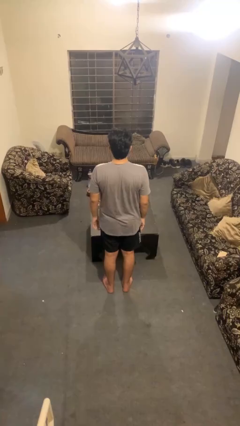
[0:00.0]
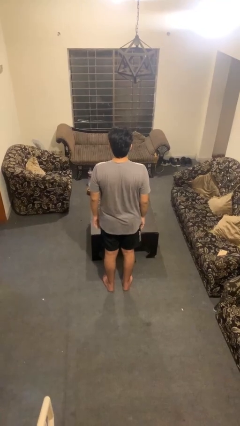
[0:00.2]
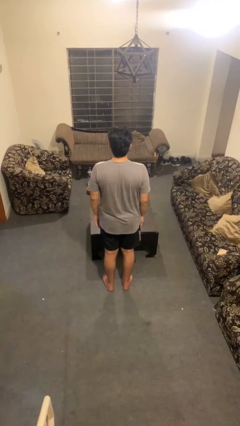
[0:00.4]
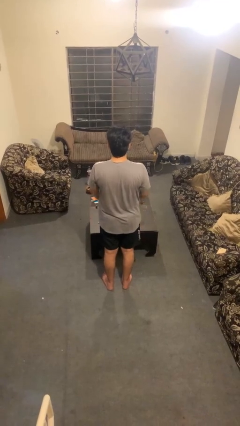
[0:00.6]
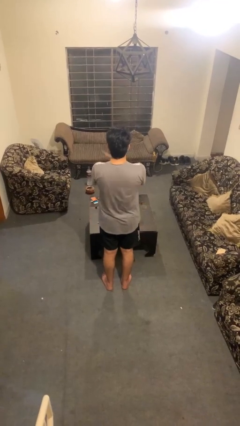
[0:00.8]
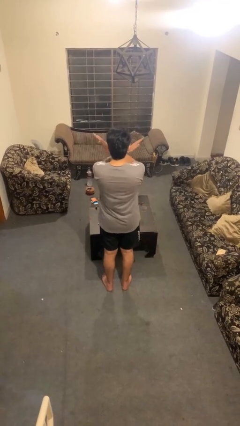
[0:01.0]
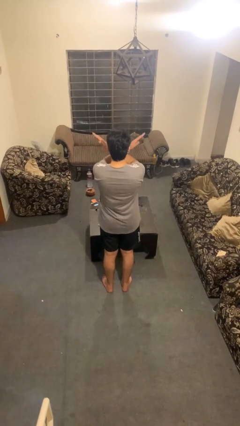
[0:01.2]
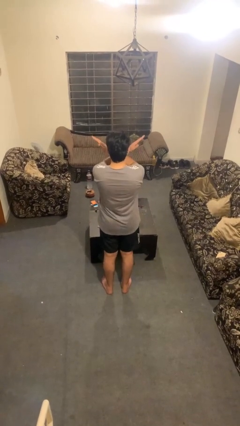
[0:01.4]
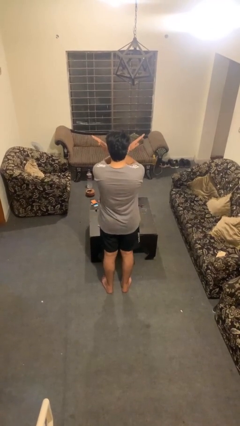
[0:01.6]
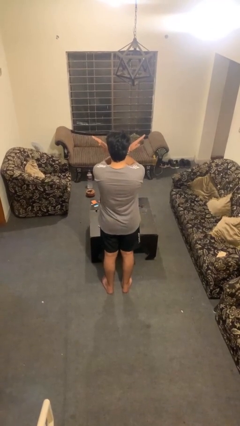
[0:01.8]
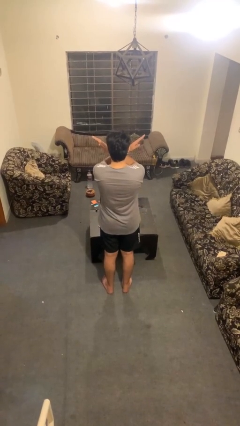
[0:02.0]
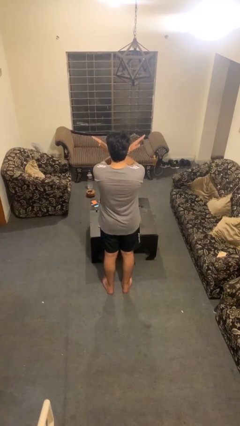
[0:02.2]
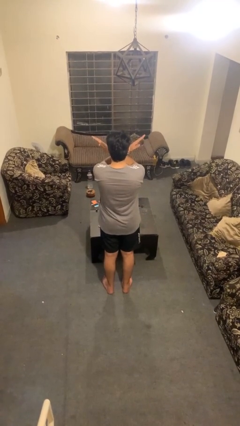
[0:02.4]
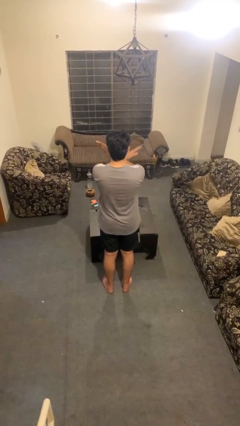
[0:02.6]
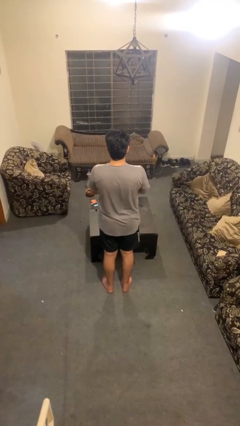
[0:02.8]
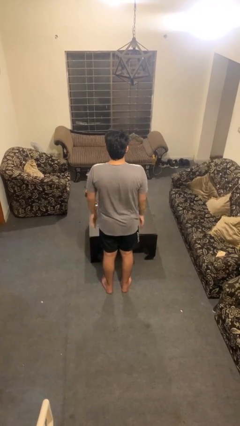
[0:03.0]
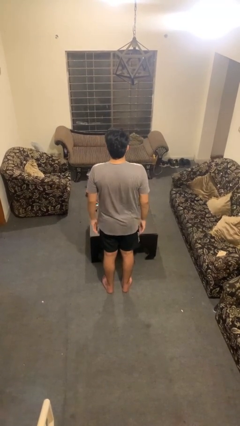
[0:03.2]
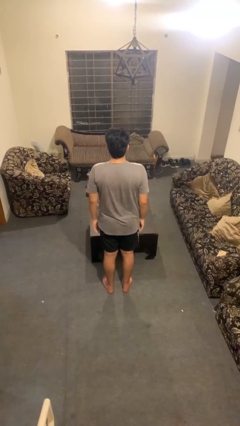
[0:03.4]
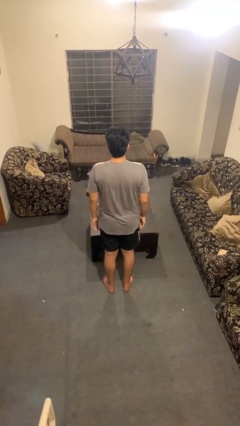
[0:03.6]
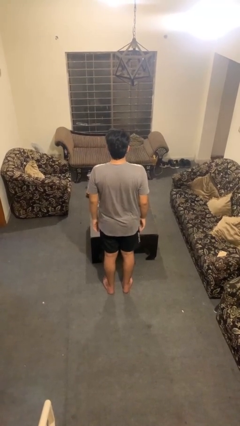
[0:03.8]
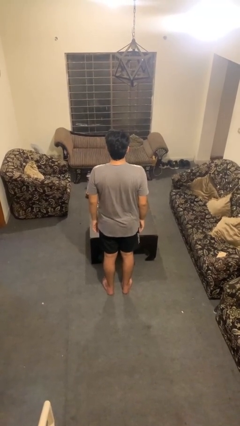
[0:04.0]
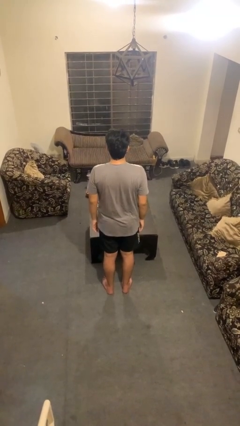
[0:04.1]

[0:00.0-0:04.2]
person gestures arms x

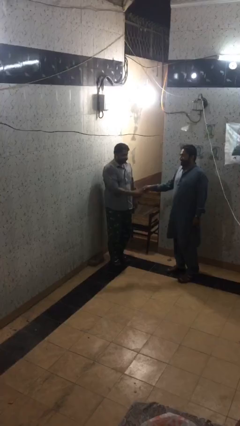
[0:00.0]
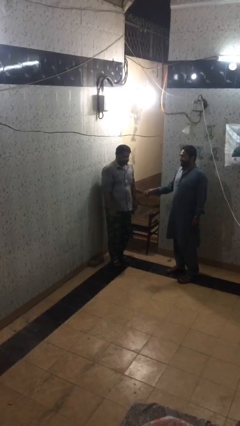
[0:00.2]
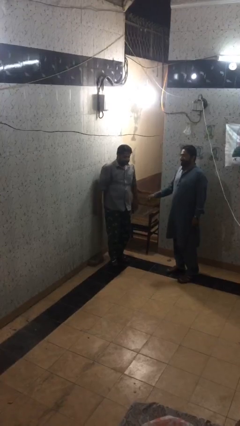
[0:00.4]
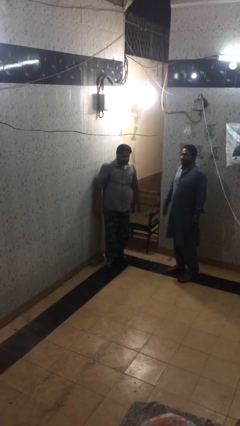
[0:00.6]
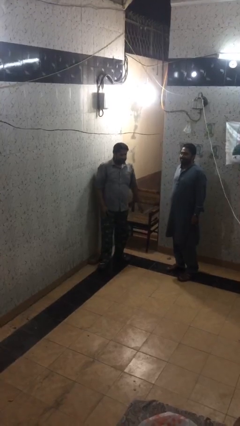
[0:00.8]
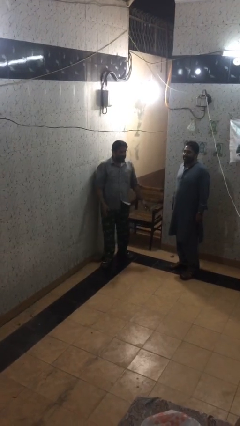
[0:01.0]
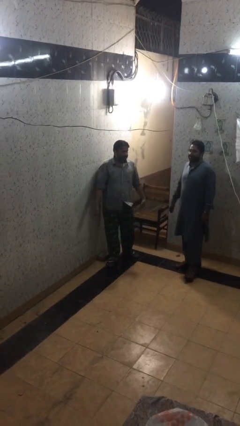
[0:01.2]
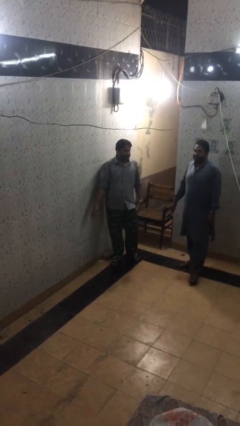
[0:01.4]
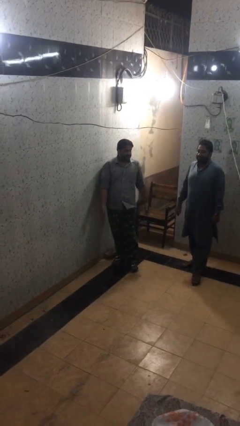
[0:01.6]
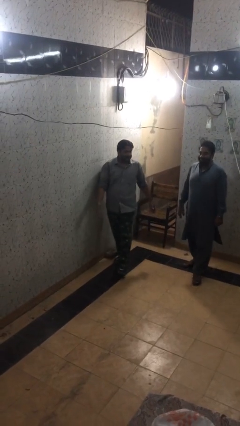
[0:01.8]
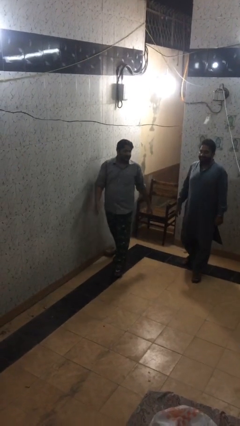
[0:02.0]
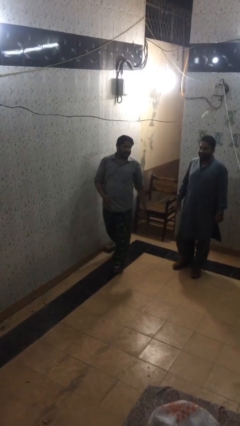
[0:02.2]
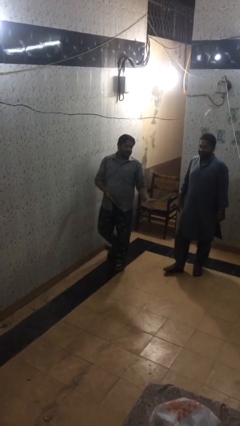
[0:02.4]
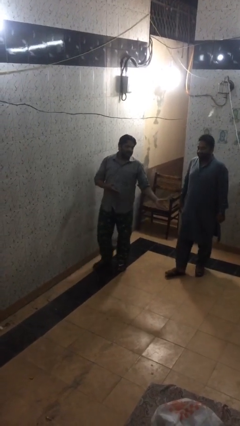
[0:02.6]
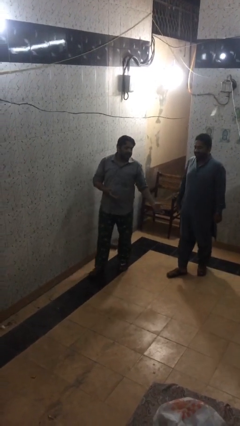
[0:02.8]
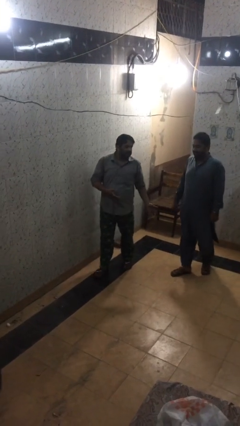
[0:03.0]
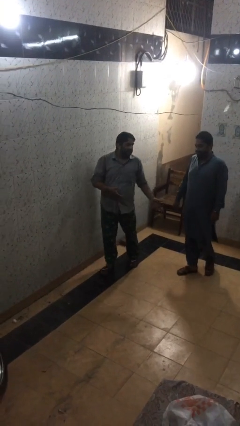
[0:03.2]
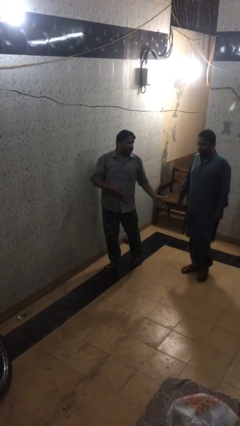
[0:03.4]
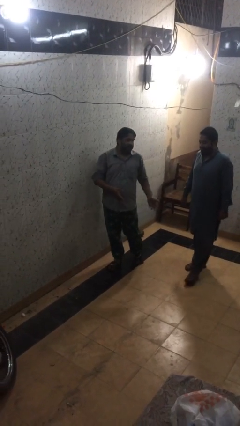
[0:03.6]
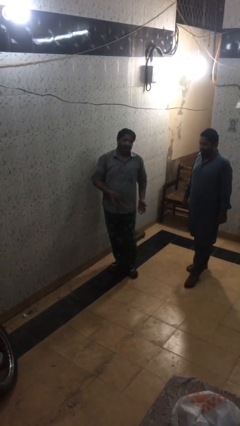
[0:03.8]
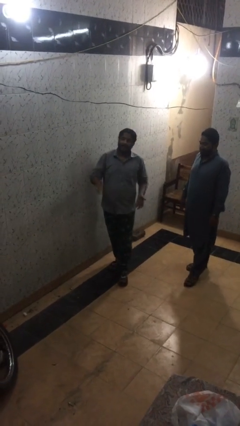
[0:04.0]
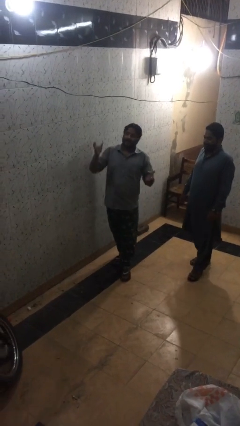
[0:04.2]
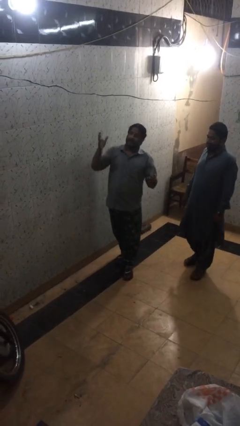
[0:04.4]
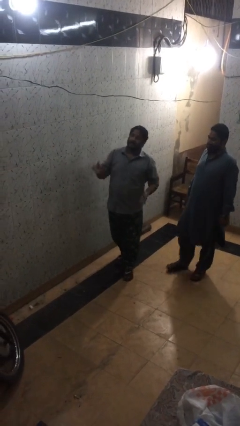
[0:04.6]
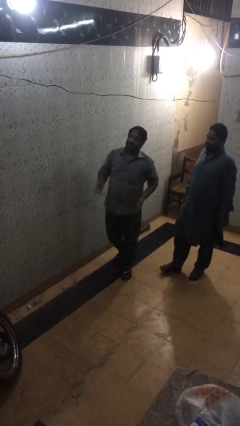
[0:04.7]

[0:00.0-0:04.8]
person talks to person

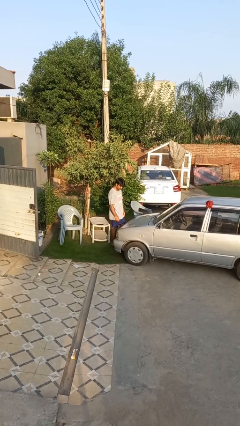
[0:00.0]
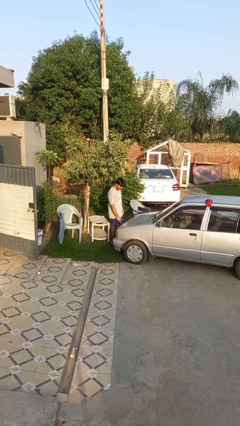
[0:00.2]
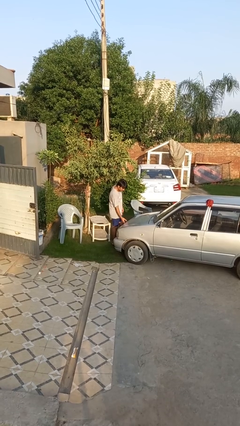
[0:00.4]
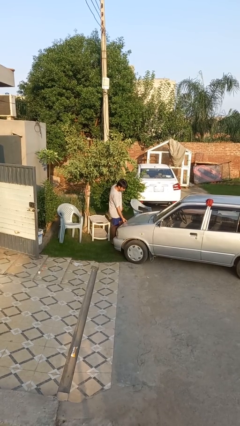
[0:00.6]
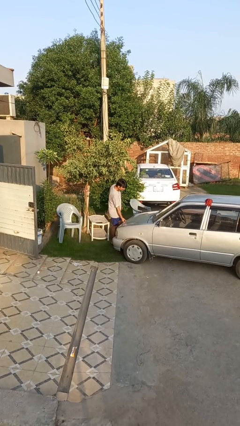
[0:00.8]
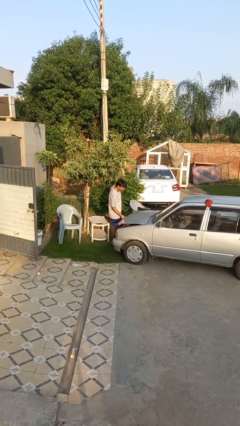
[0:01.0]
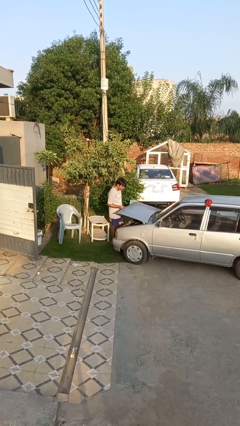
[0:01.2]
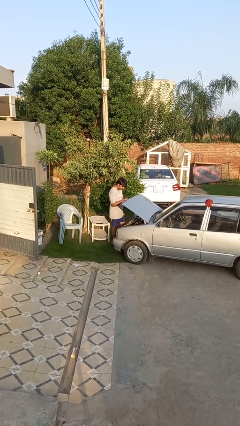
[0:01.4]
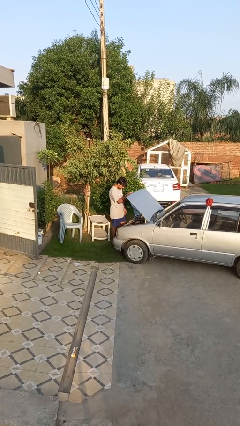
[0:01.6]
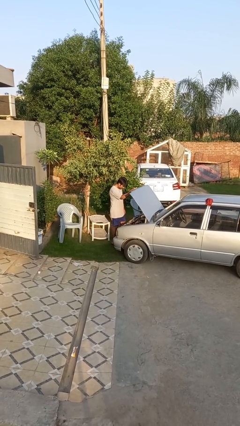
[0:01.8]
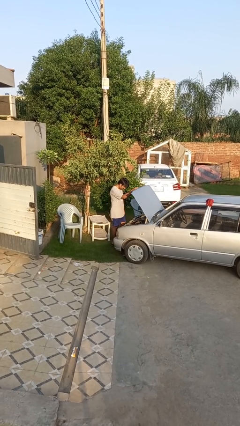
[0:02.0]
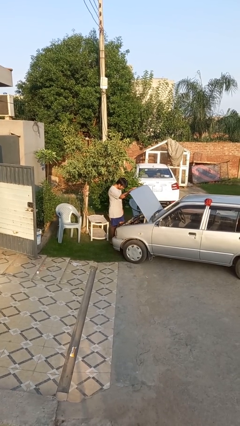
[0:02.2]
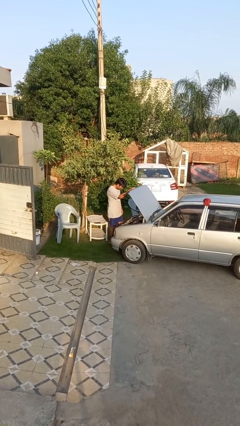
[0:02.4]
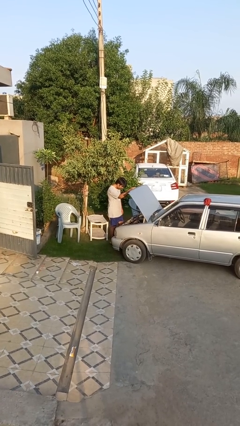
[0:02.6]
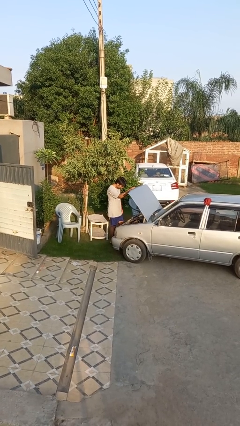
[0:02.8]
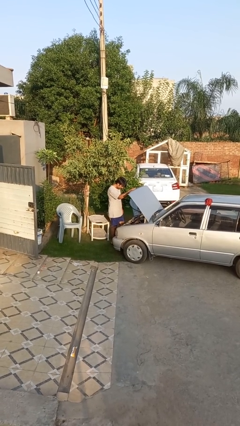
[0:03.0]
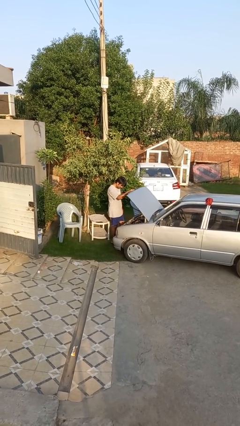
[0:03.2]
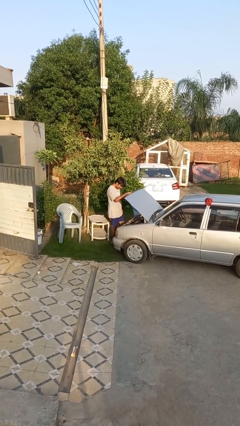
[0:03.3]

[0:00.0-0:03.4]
person opens car hood

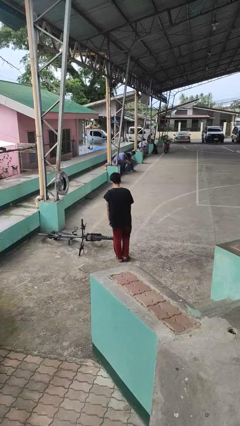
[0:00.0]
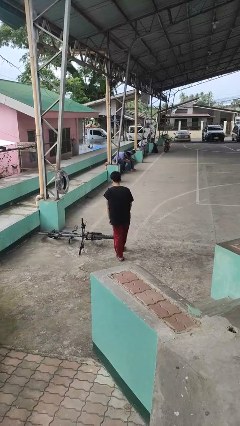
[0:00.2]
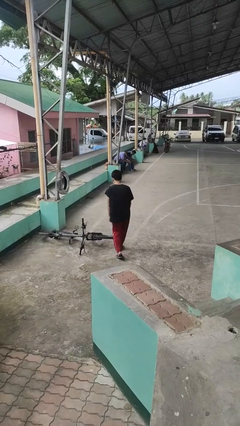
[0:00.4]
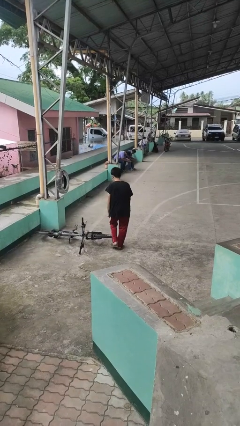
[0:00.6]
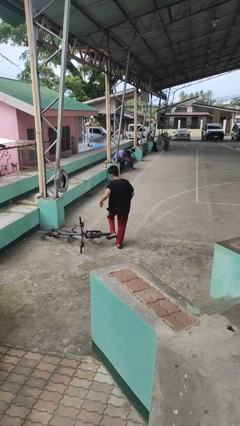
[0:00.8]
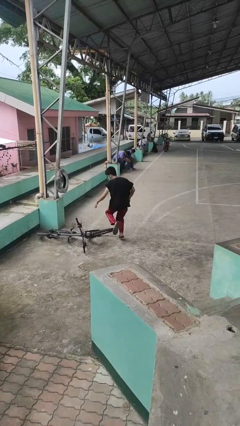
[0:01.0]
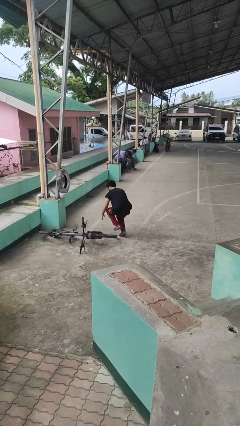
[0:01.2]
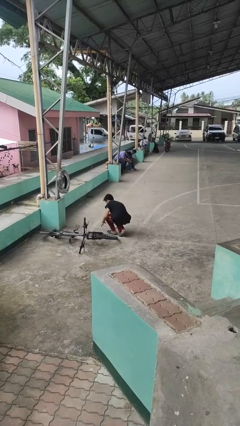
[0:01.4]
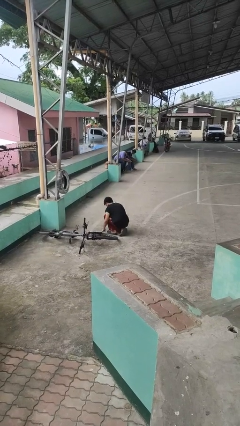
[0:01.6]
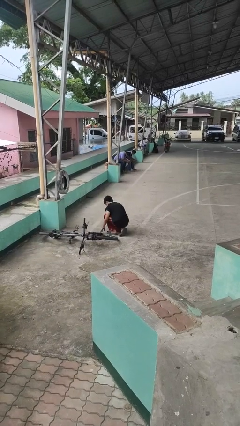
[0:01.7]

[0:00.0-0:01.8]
person trips on object on floor

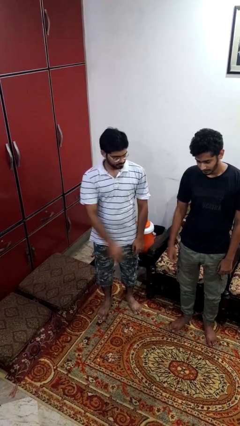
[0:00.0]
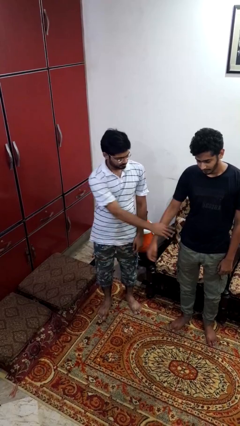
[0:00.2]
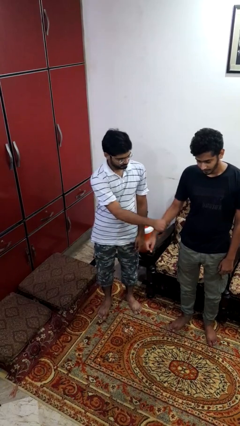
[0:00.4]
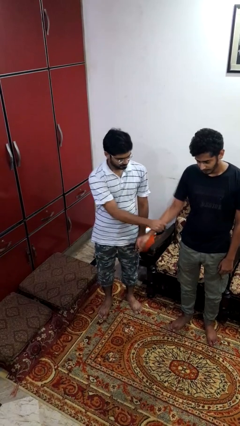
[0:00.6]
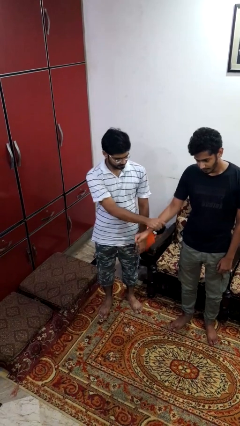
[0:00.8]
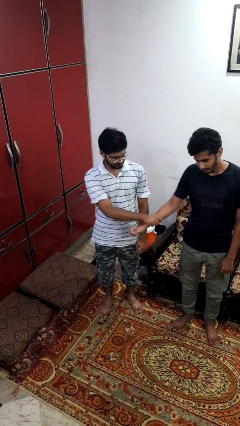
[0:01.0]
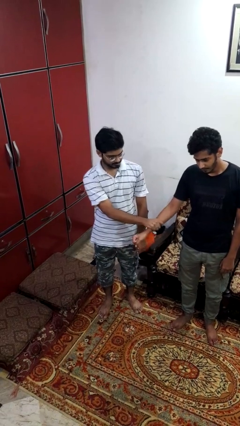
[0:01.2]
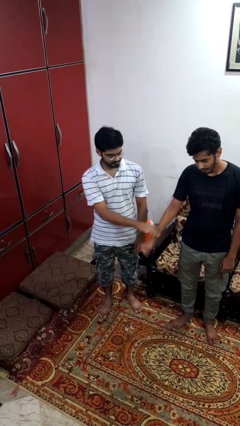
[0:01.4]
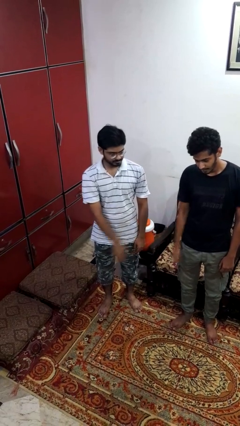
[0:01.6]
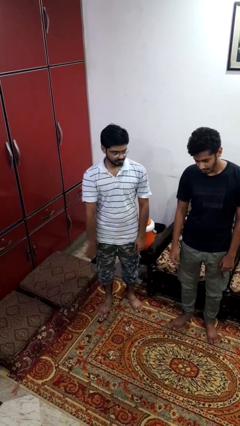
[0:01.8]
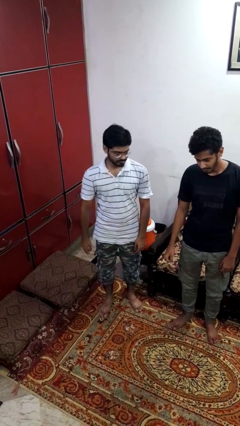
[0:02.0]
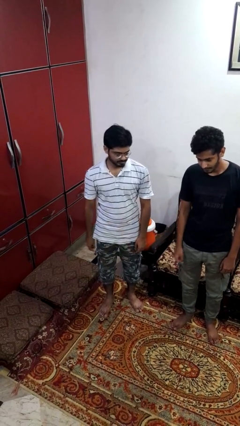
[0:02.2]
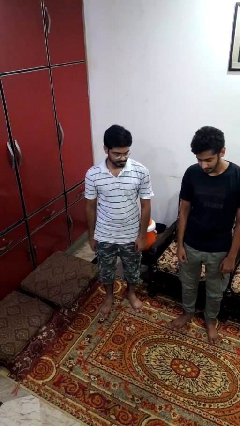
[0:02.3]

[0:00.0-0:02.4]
person grabs person by forearm

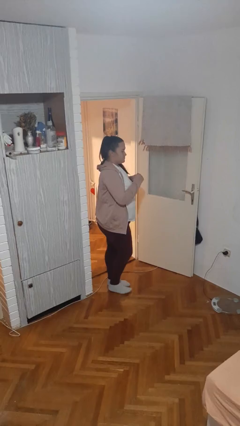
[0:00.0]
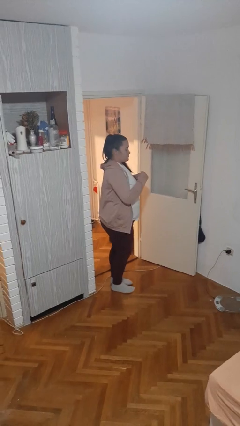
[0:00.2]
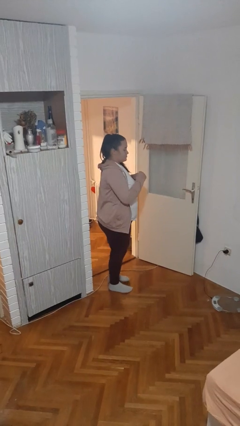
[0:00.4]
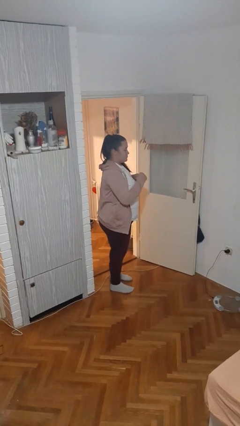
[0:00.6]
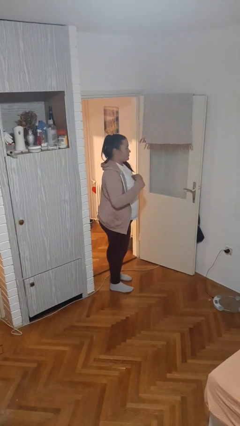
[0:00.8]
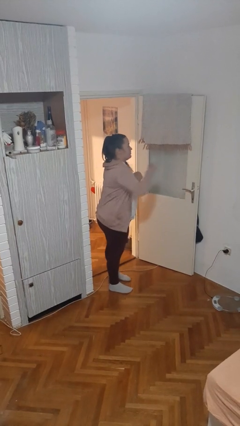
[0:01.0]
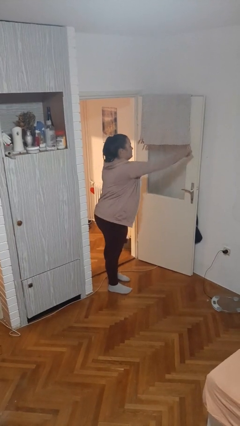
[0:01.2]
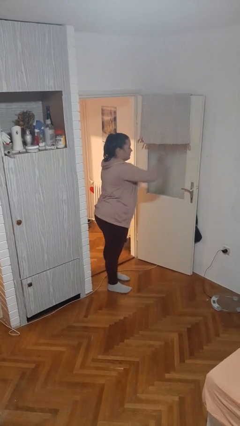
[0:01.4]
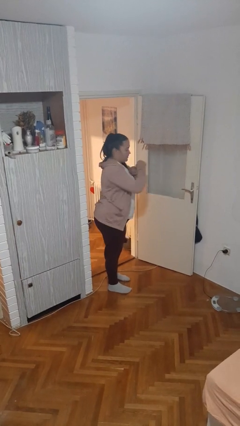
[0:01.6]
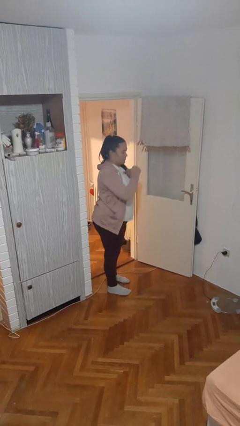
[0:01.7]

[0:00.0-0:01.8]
person punches
